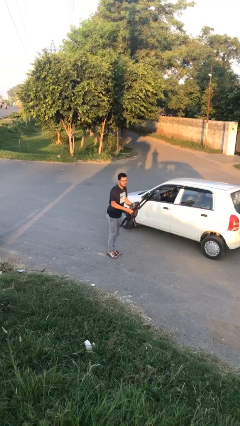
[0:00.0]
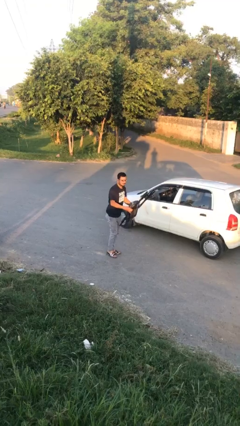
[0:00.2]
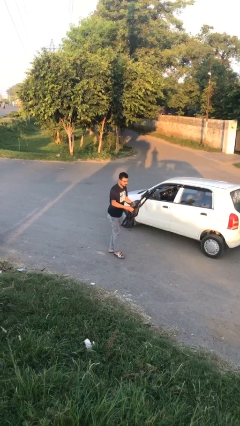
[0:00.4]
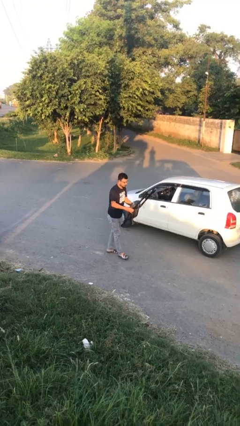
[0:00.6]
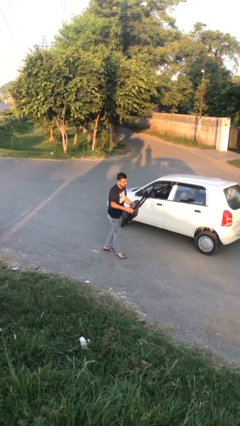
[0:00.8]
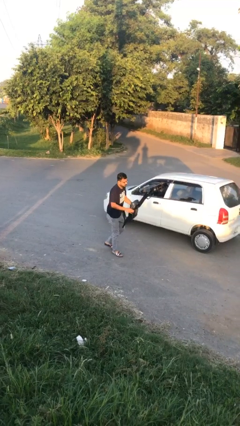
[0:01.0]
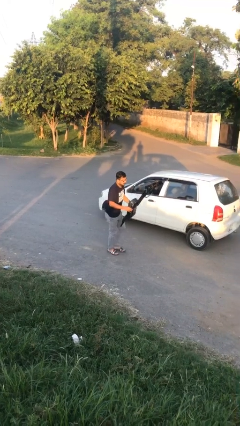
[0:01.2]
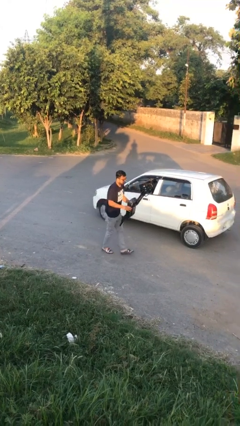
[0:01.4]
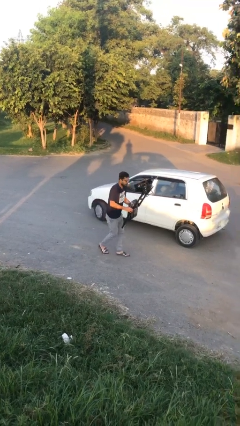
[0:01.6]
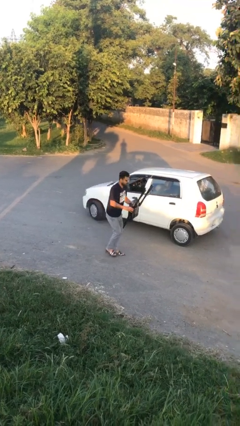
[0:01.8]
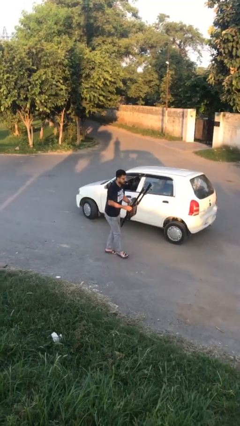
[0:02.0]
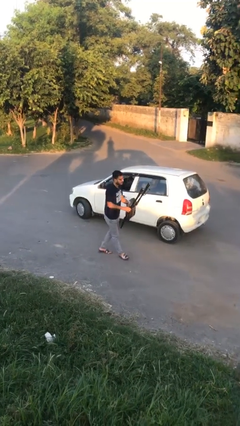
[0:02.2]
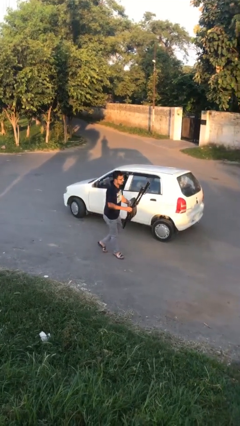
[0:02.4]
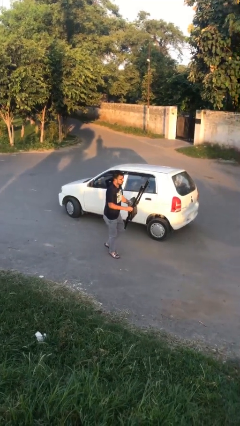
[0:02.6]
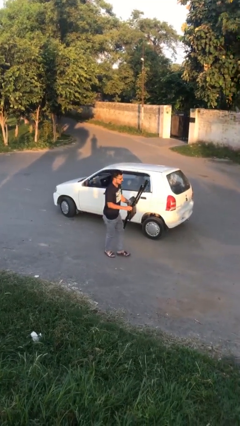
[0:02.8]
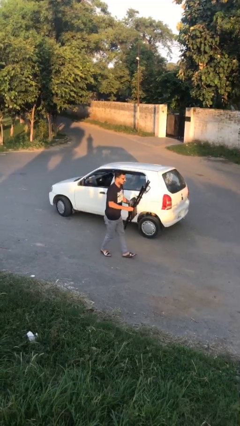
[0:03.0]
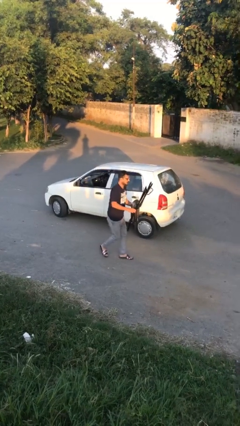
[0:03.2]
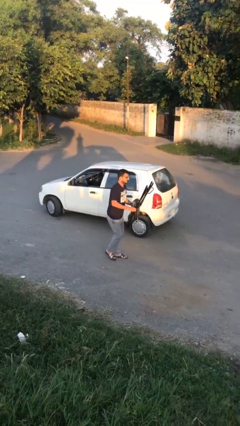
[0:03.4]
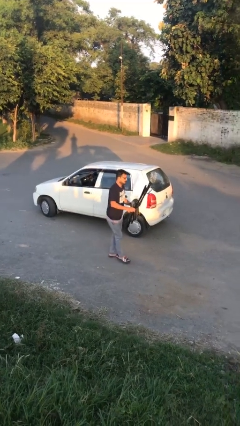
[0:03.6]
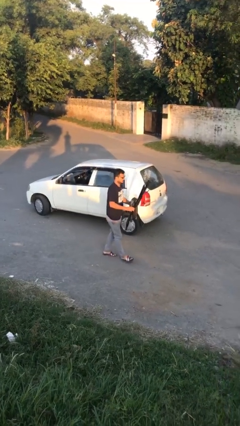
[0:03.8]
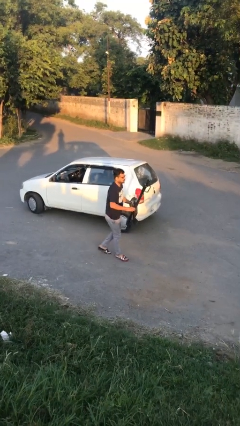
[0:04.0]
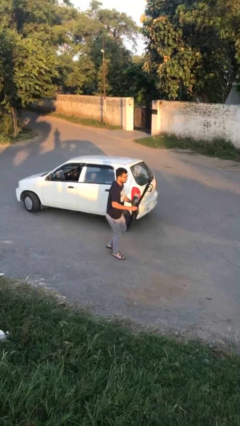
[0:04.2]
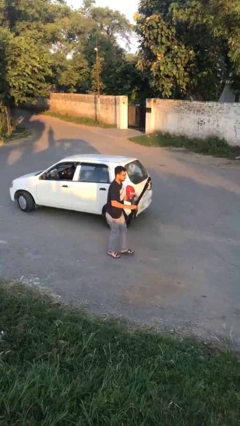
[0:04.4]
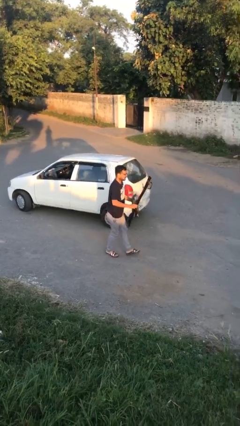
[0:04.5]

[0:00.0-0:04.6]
person carries heavy object

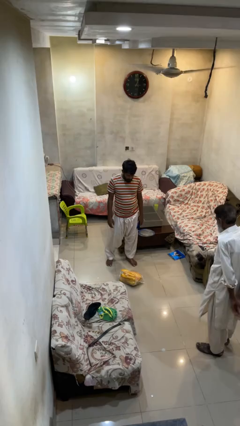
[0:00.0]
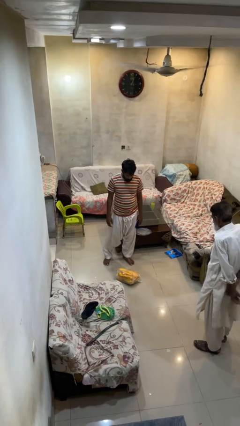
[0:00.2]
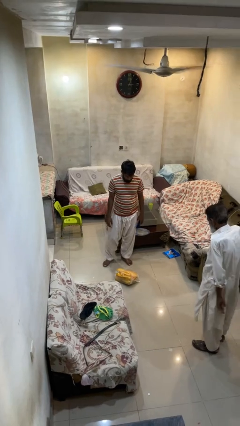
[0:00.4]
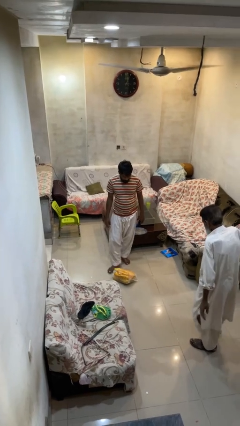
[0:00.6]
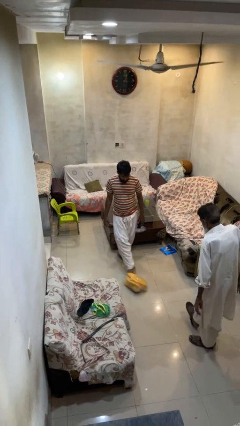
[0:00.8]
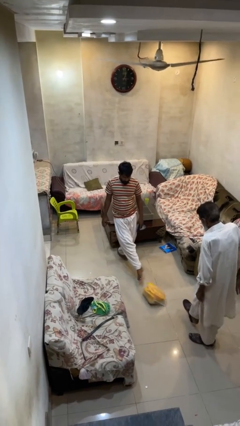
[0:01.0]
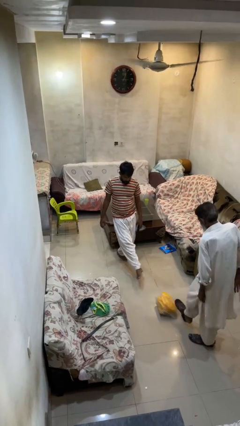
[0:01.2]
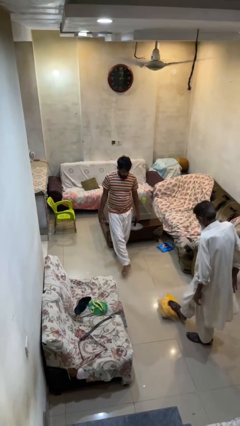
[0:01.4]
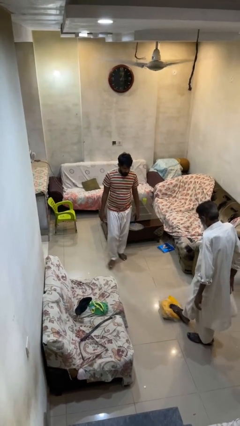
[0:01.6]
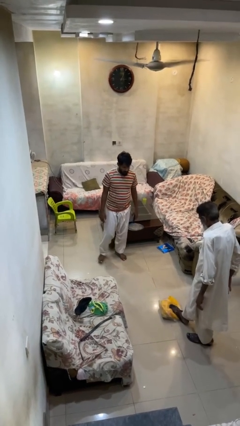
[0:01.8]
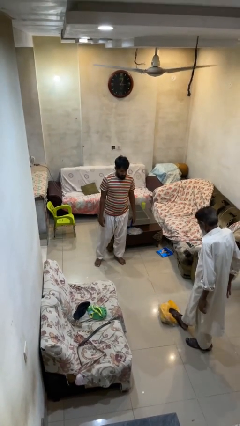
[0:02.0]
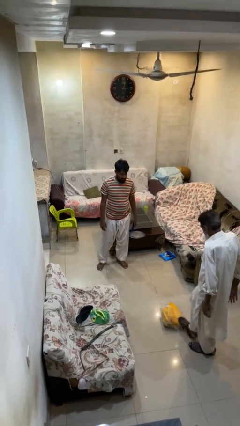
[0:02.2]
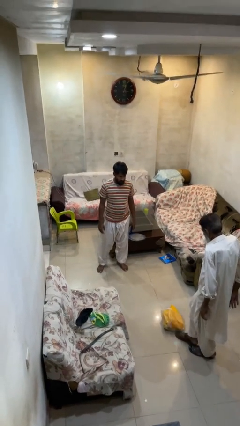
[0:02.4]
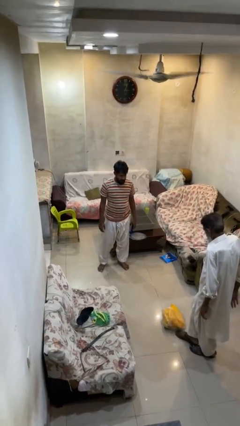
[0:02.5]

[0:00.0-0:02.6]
person kicks object to person

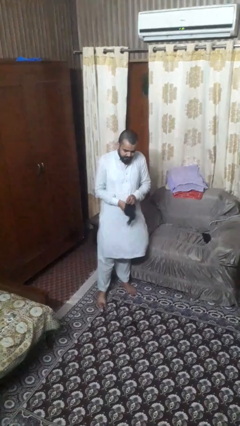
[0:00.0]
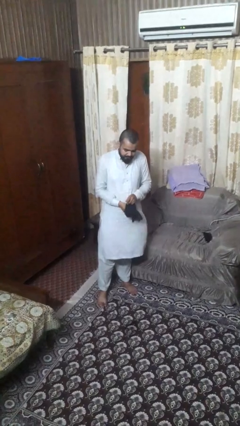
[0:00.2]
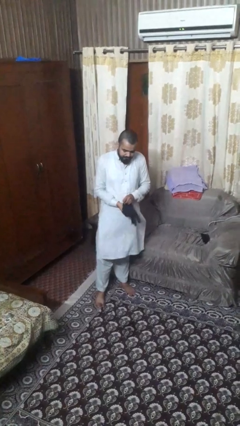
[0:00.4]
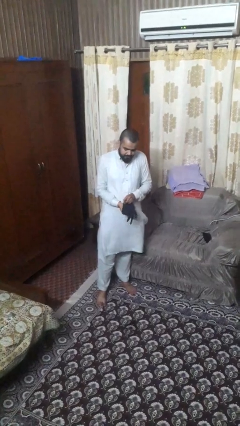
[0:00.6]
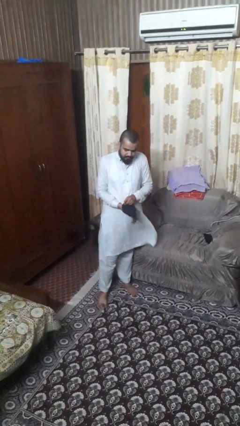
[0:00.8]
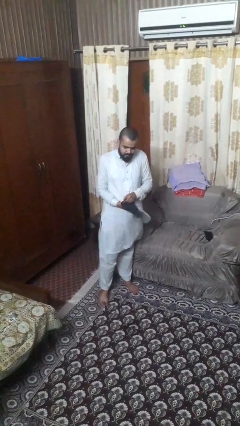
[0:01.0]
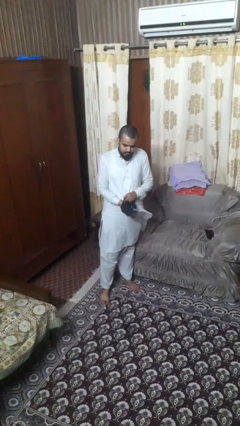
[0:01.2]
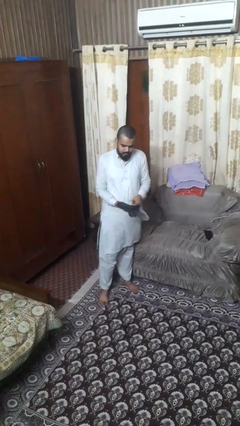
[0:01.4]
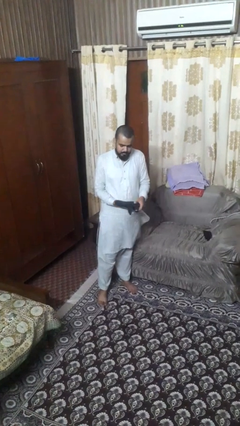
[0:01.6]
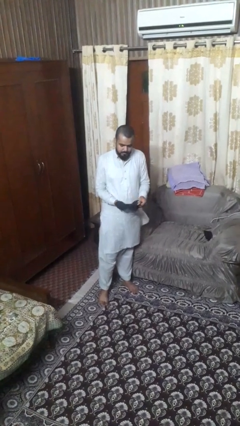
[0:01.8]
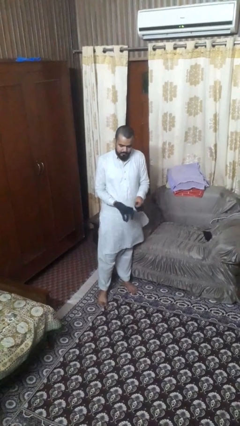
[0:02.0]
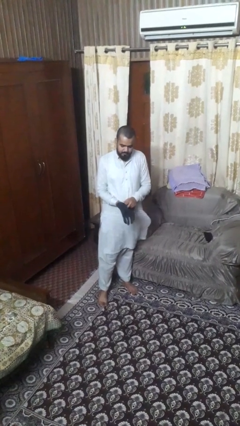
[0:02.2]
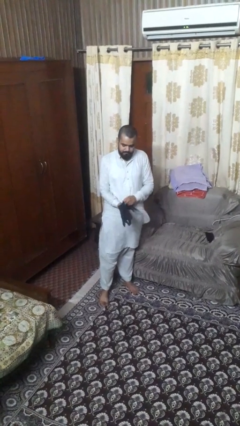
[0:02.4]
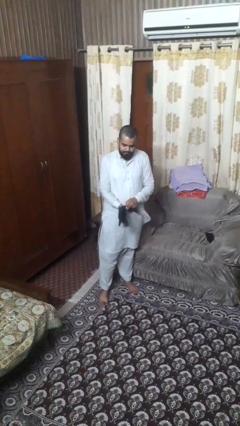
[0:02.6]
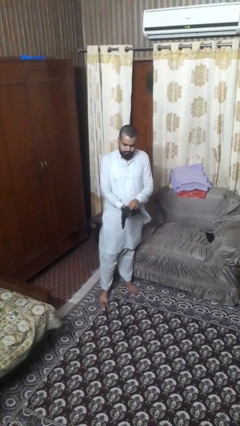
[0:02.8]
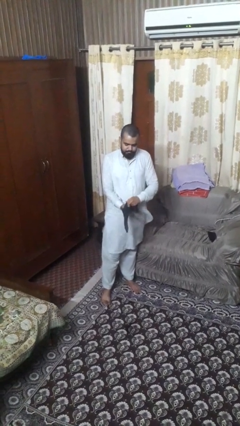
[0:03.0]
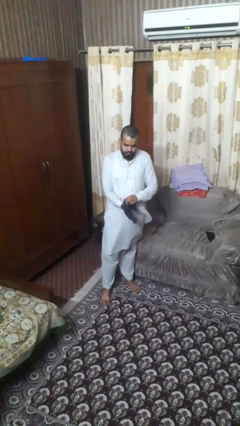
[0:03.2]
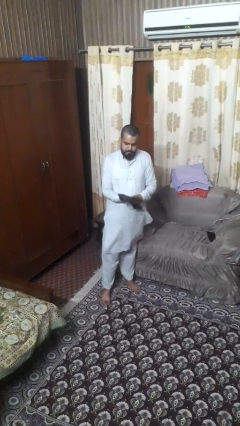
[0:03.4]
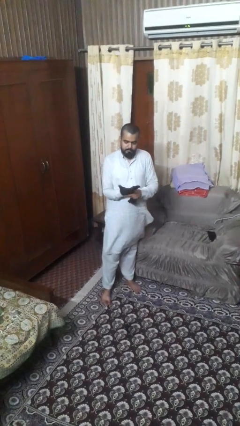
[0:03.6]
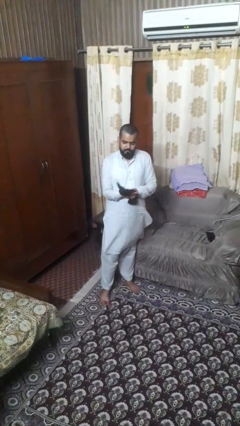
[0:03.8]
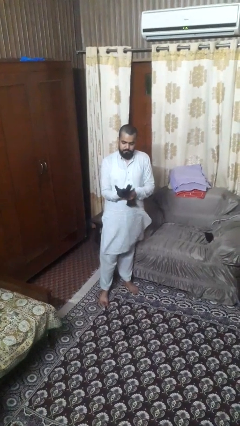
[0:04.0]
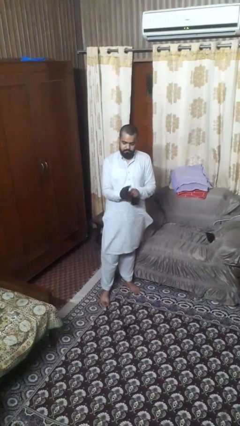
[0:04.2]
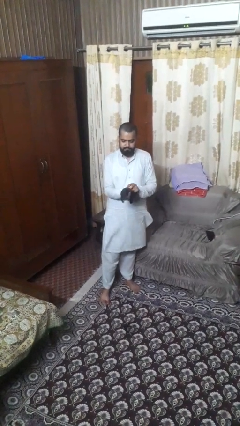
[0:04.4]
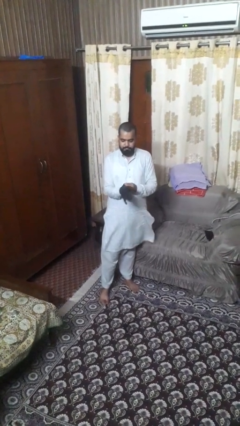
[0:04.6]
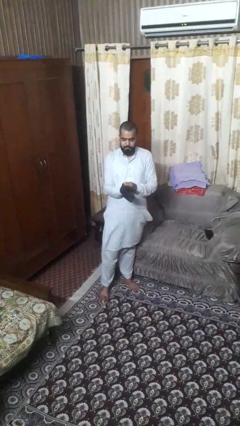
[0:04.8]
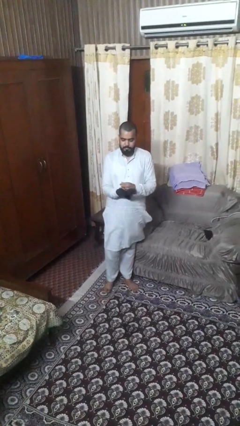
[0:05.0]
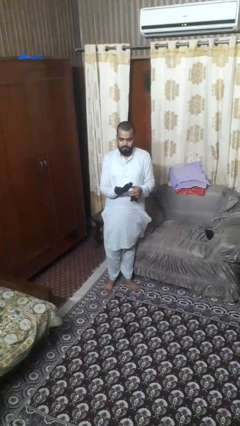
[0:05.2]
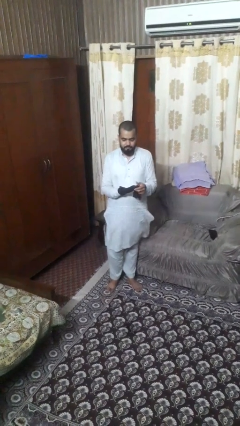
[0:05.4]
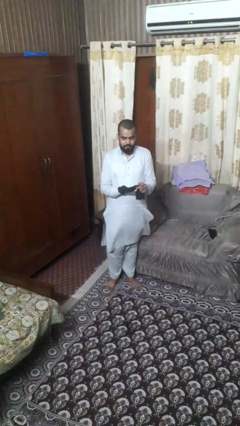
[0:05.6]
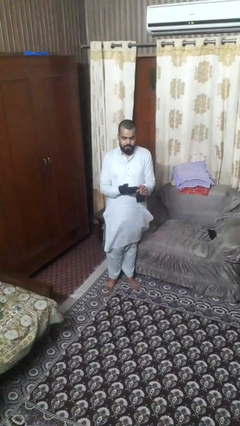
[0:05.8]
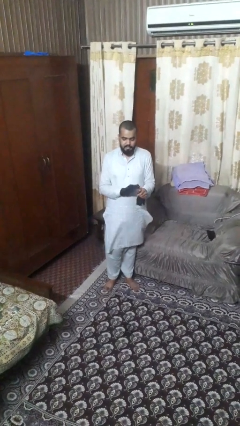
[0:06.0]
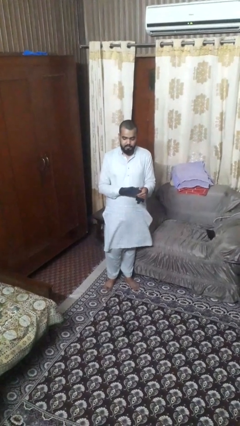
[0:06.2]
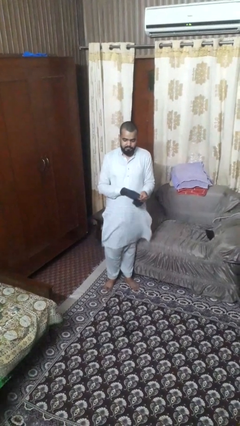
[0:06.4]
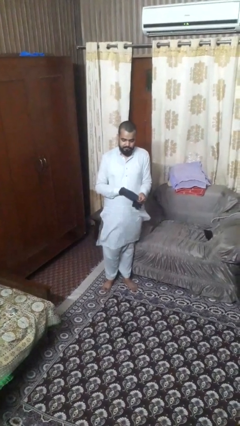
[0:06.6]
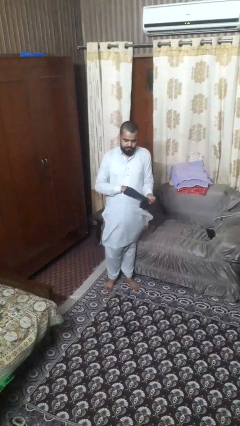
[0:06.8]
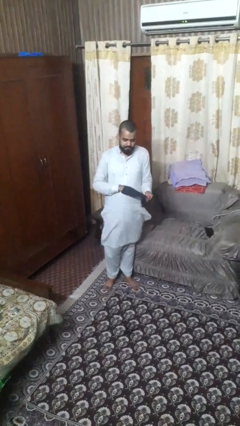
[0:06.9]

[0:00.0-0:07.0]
person puts on gloves

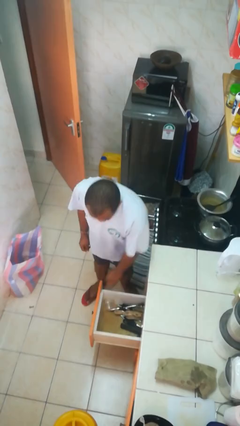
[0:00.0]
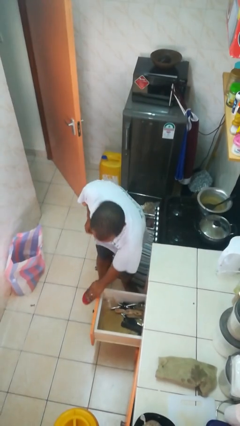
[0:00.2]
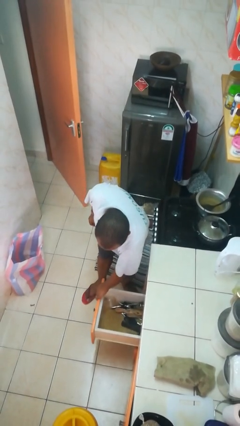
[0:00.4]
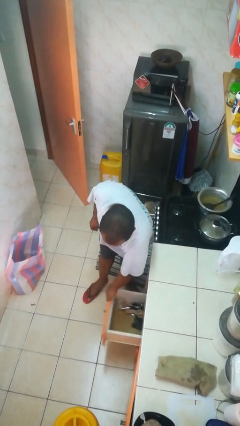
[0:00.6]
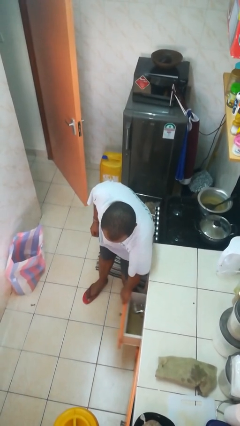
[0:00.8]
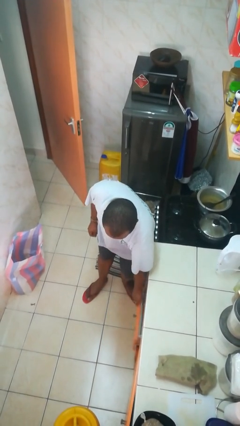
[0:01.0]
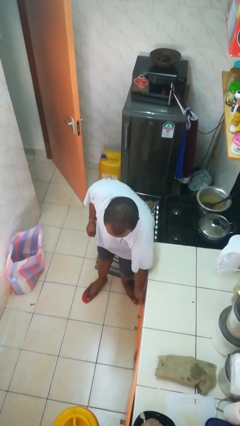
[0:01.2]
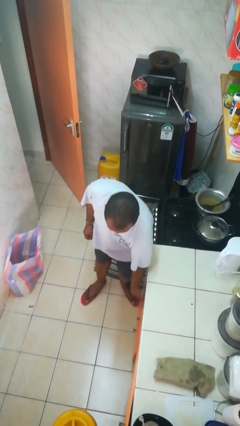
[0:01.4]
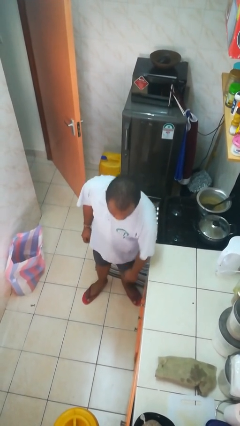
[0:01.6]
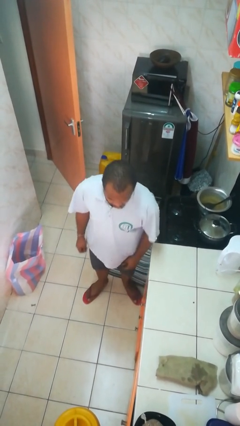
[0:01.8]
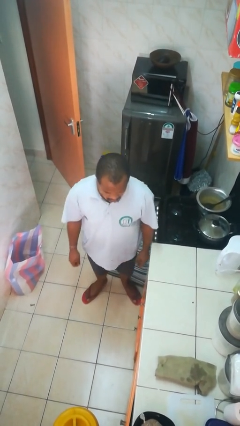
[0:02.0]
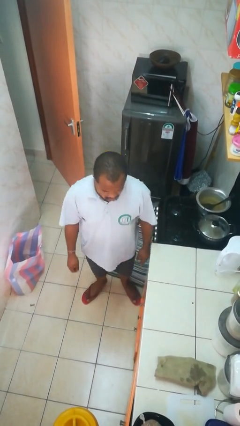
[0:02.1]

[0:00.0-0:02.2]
person closes kitchen drawer

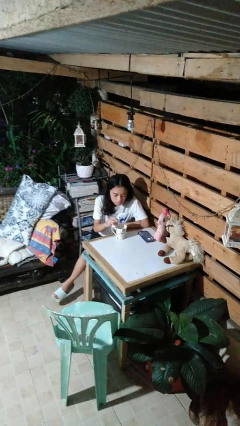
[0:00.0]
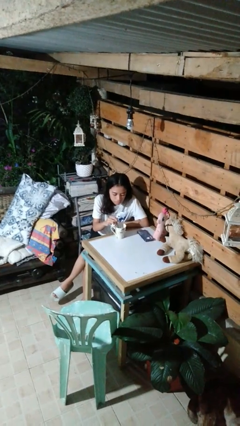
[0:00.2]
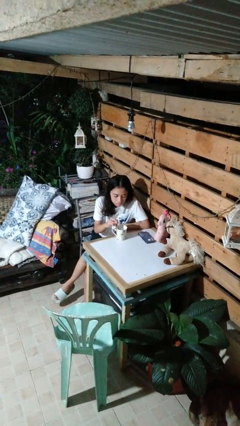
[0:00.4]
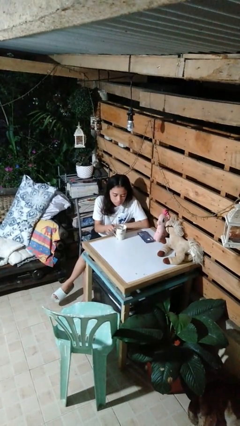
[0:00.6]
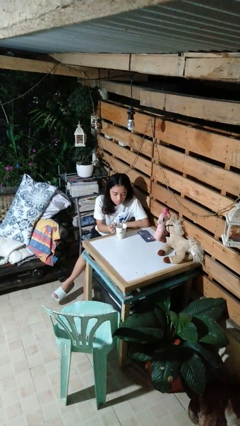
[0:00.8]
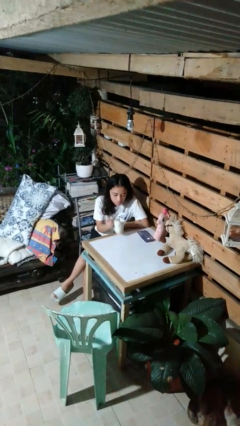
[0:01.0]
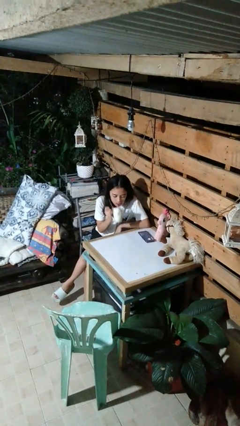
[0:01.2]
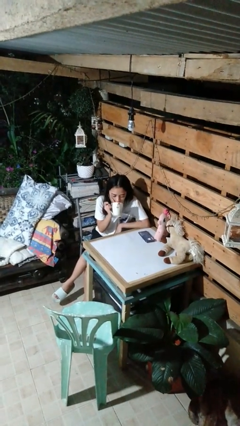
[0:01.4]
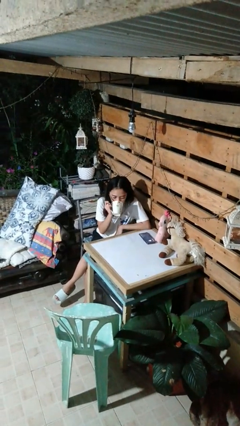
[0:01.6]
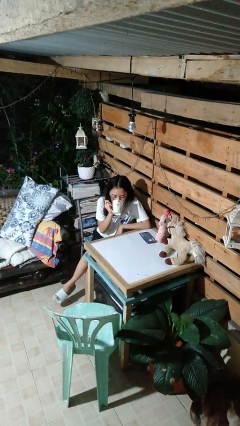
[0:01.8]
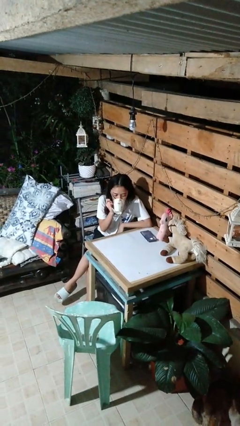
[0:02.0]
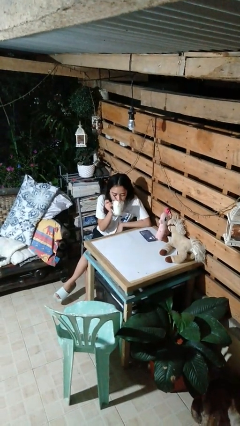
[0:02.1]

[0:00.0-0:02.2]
person drinks from mug
